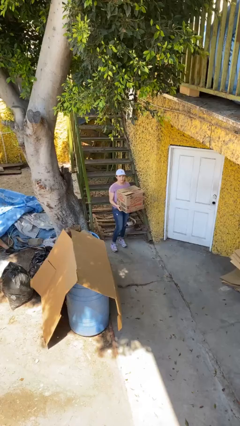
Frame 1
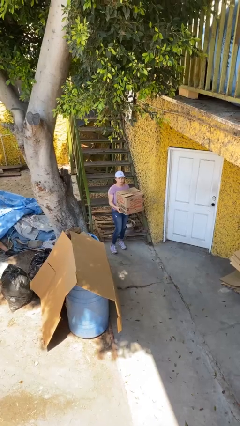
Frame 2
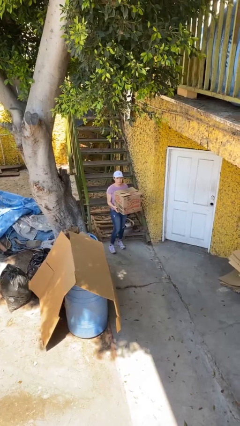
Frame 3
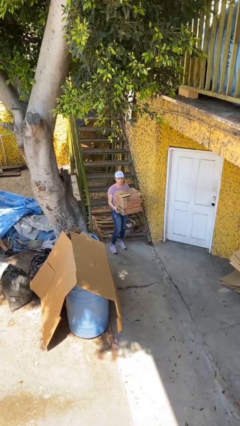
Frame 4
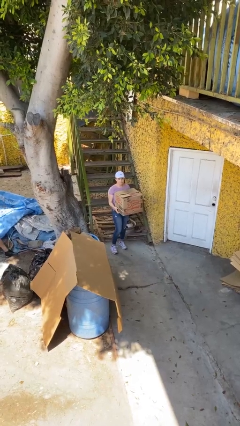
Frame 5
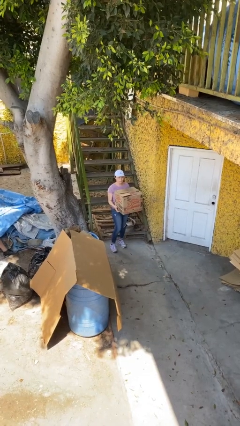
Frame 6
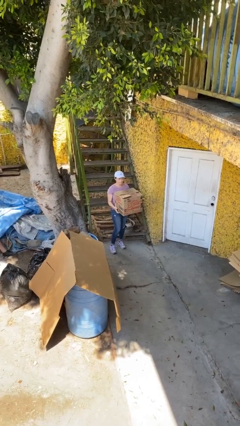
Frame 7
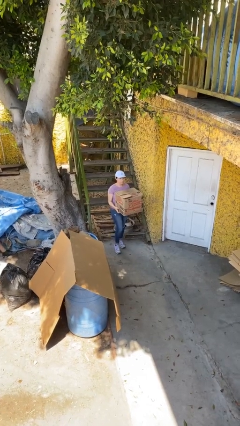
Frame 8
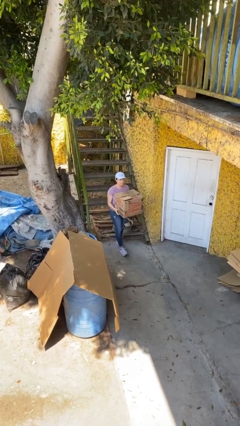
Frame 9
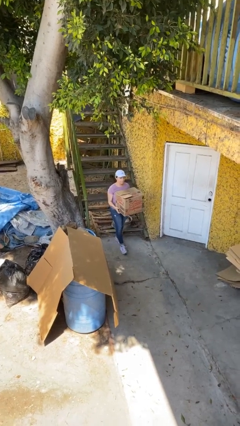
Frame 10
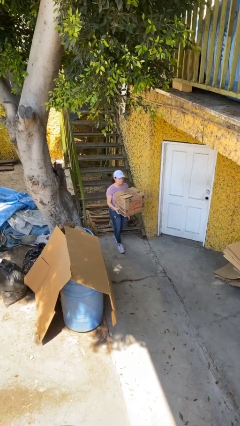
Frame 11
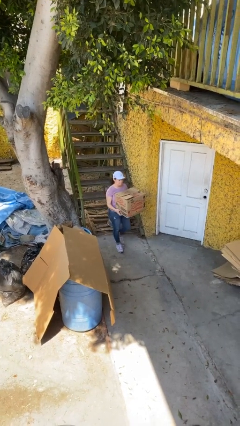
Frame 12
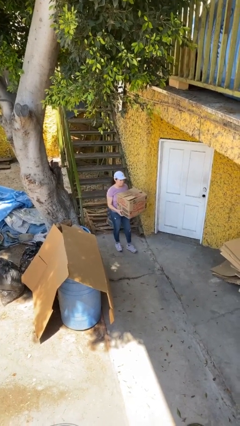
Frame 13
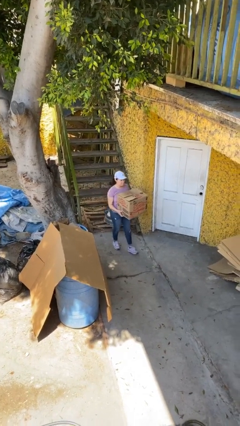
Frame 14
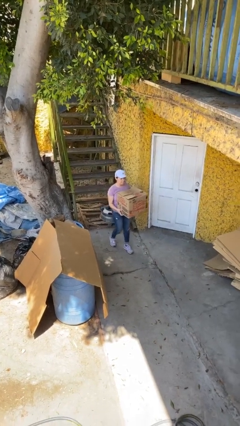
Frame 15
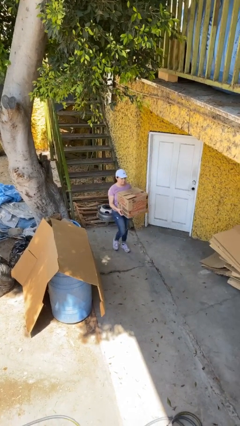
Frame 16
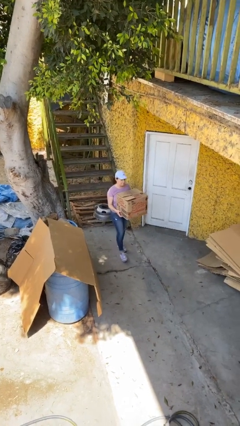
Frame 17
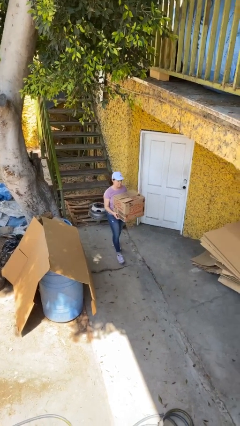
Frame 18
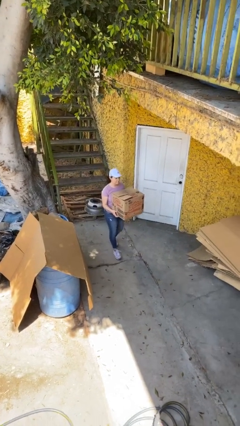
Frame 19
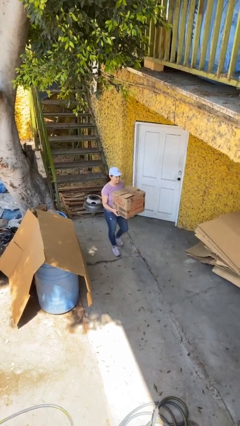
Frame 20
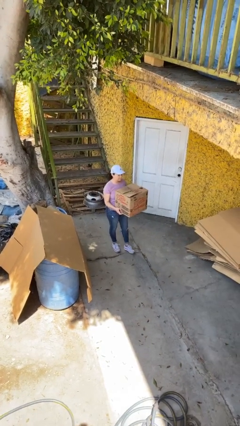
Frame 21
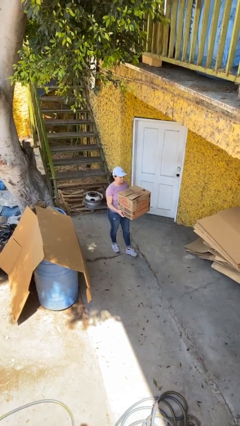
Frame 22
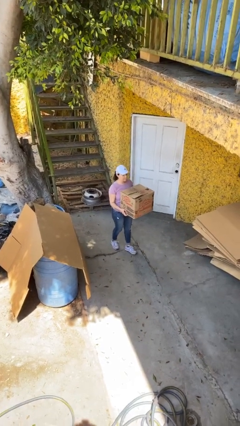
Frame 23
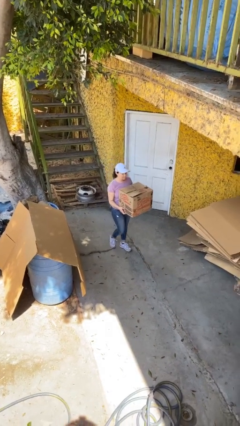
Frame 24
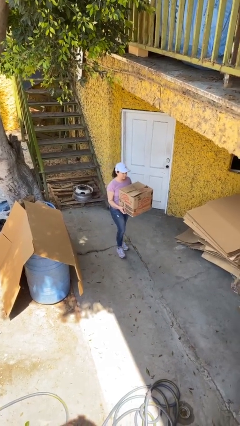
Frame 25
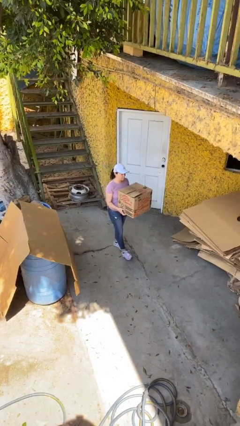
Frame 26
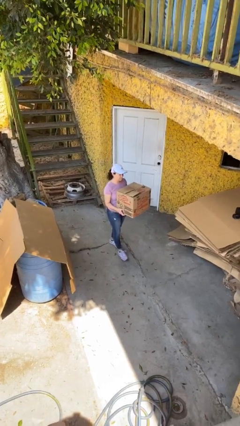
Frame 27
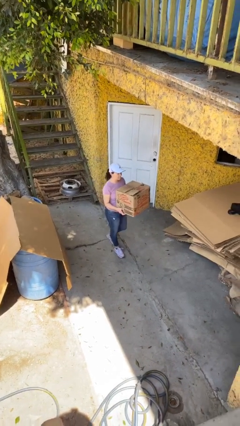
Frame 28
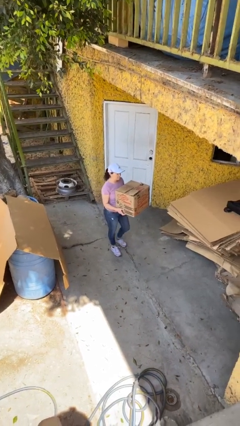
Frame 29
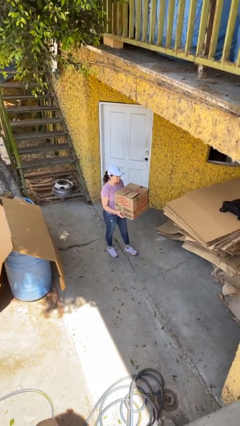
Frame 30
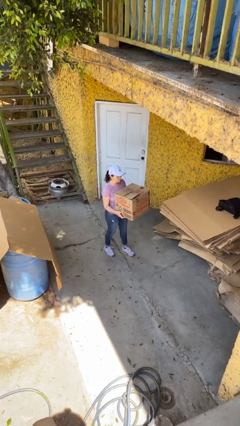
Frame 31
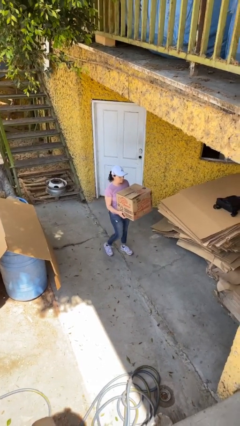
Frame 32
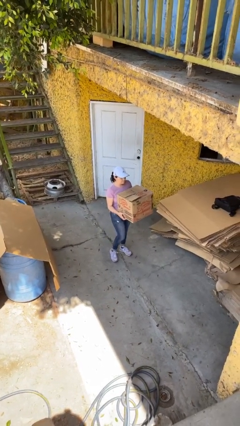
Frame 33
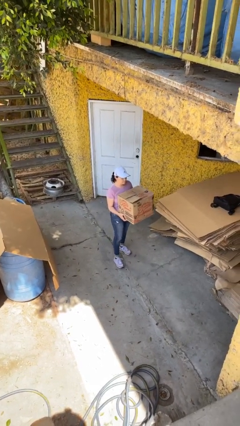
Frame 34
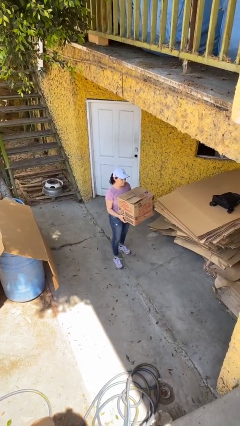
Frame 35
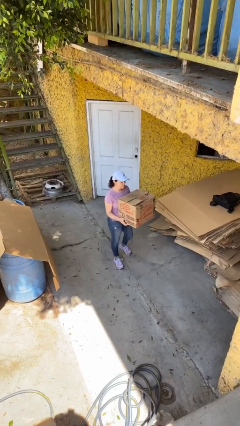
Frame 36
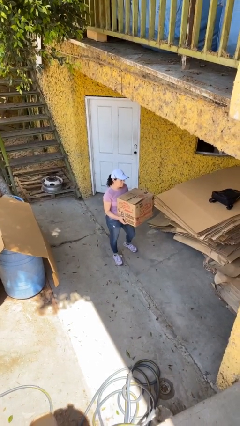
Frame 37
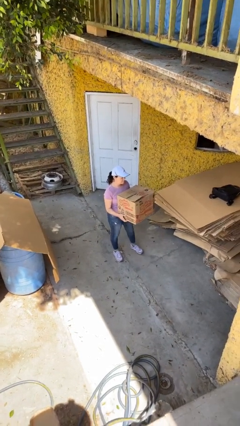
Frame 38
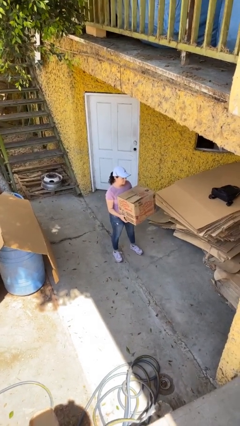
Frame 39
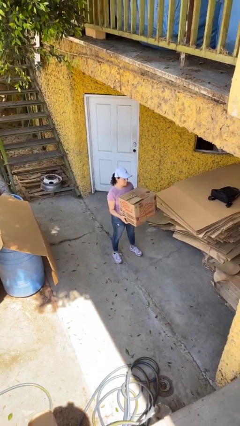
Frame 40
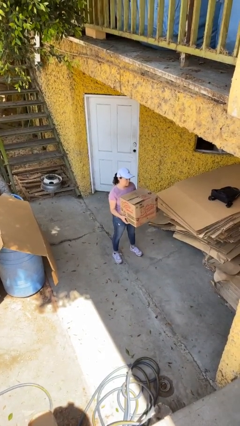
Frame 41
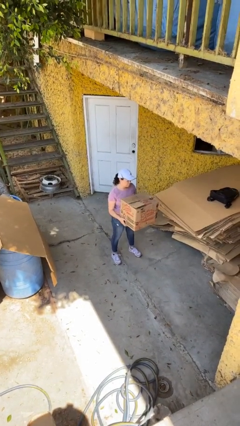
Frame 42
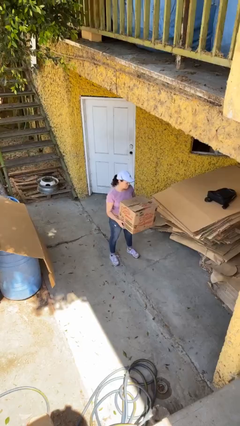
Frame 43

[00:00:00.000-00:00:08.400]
person carries heavy object

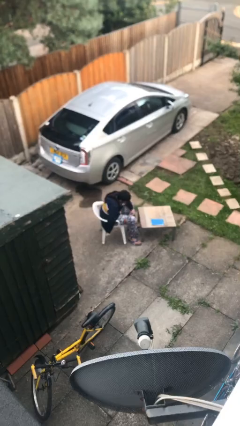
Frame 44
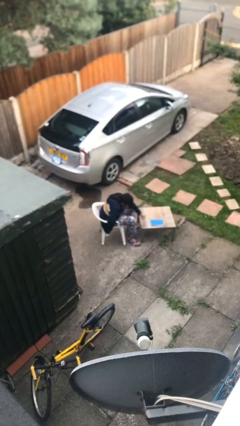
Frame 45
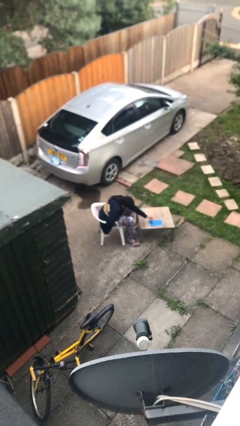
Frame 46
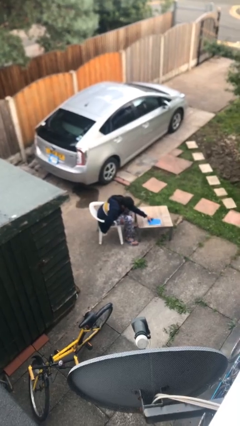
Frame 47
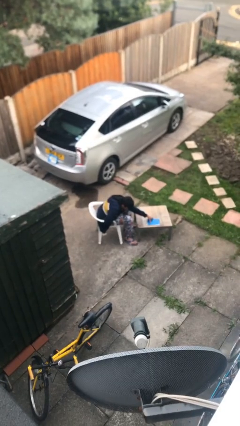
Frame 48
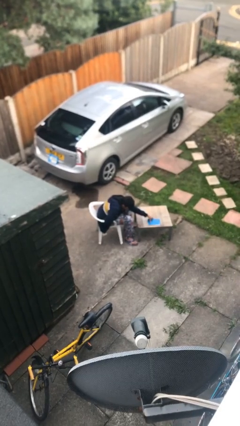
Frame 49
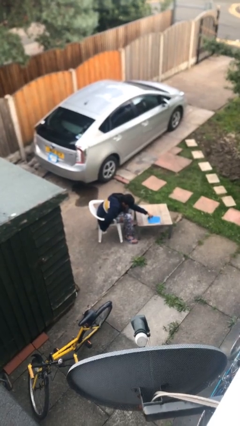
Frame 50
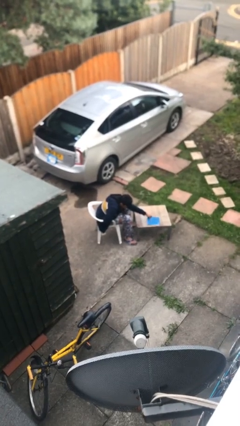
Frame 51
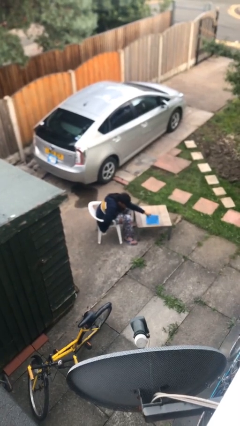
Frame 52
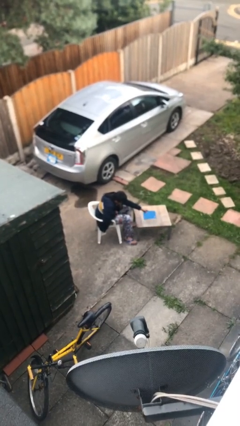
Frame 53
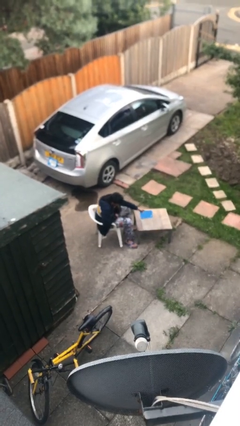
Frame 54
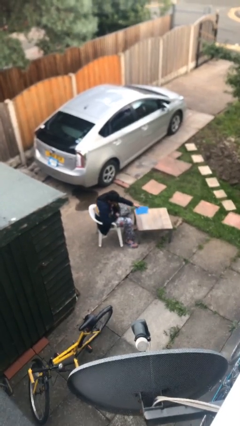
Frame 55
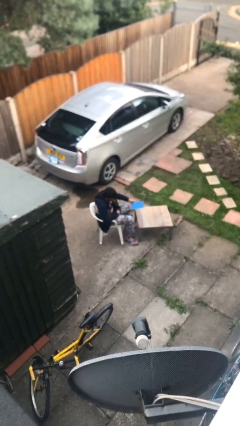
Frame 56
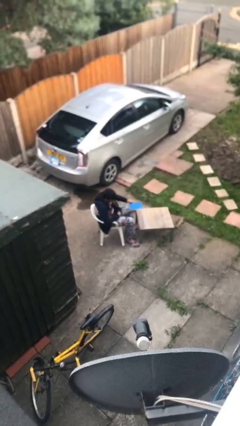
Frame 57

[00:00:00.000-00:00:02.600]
person picks up object from table

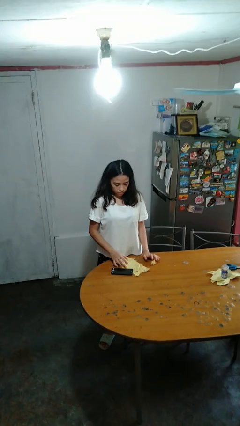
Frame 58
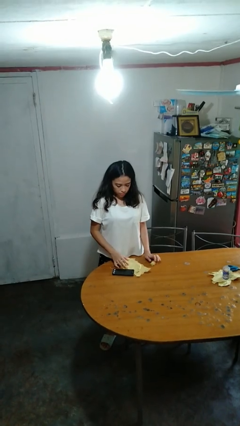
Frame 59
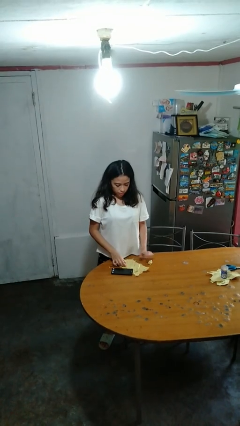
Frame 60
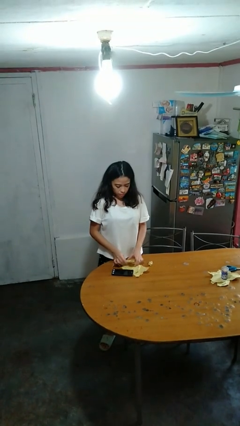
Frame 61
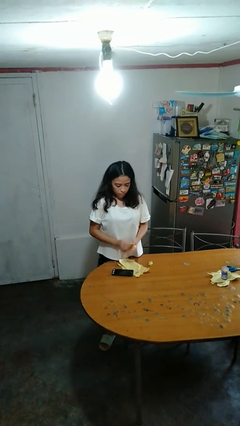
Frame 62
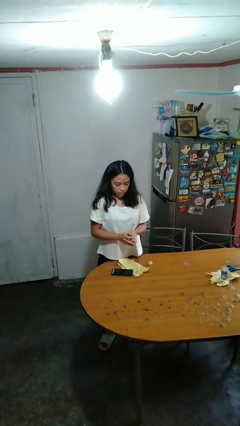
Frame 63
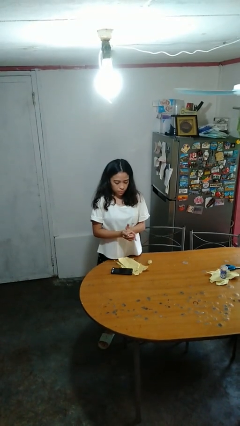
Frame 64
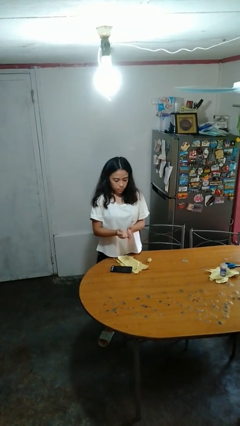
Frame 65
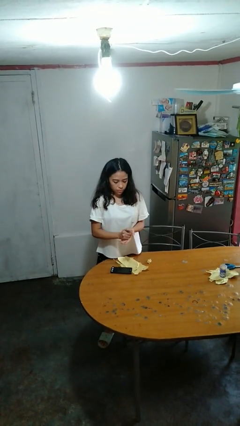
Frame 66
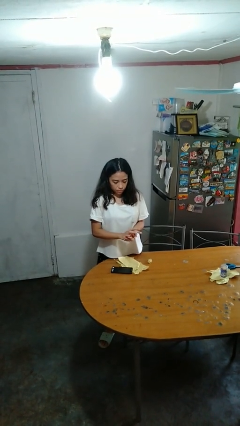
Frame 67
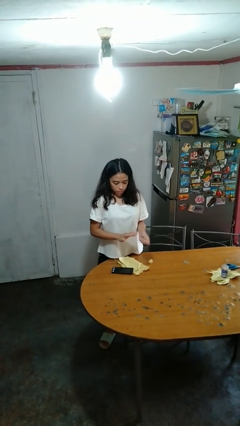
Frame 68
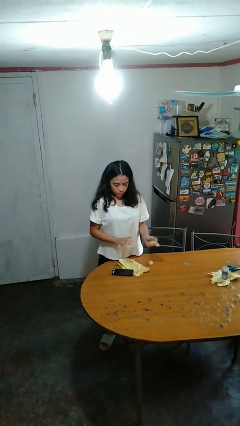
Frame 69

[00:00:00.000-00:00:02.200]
person crumples paper

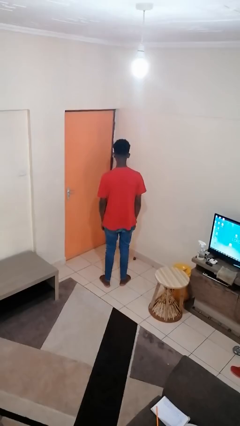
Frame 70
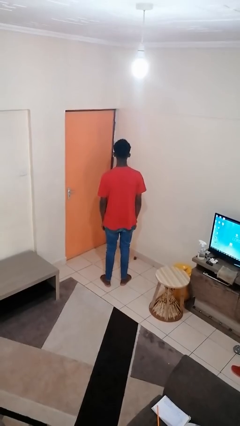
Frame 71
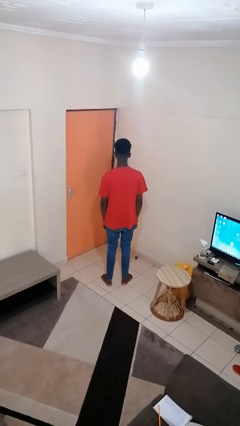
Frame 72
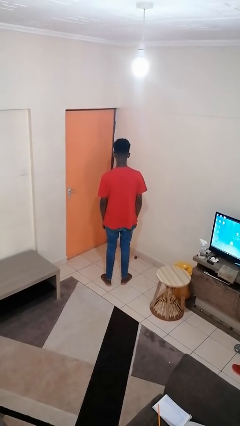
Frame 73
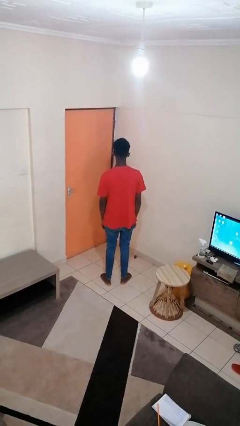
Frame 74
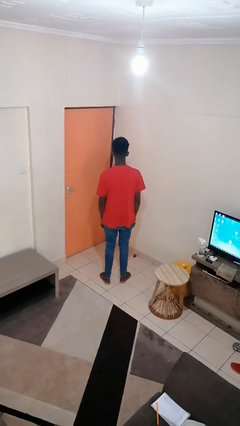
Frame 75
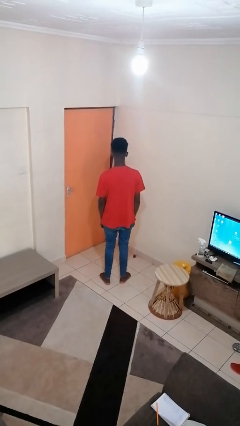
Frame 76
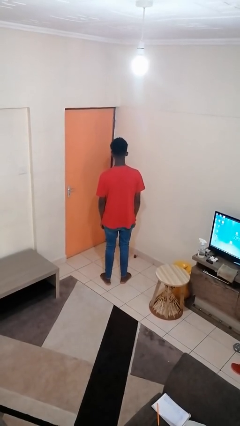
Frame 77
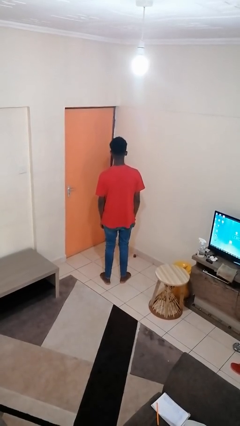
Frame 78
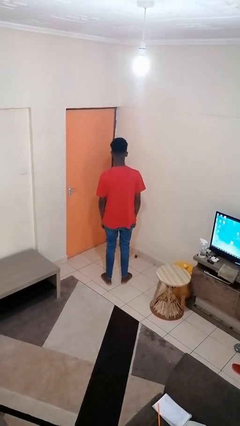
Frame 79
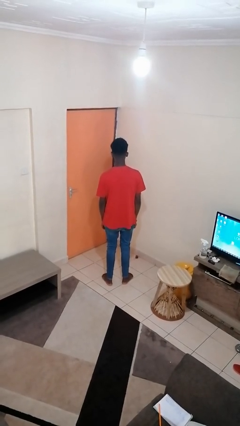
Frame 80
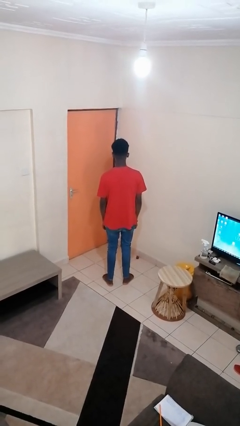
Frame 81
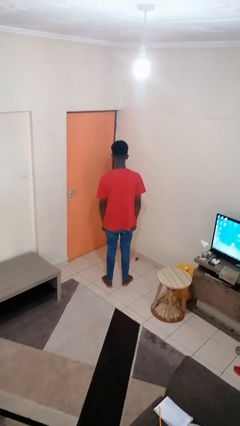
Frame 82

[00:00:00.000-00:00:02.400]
person nods head

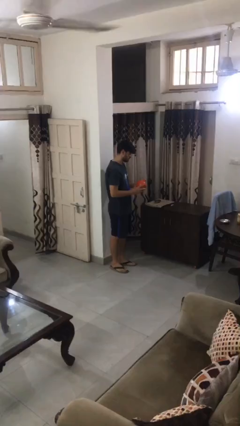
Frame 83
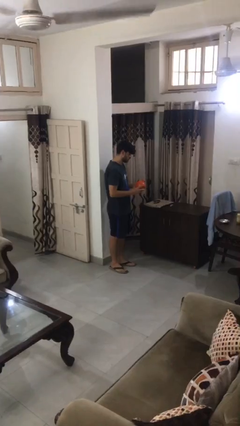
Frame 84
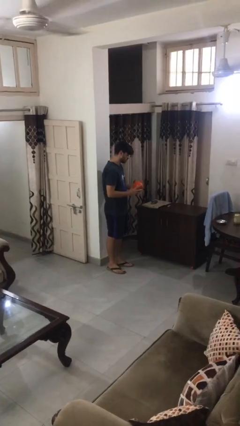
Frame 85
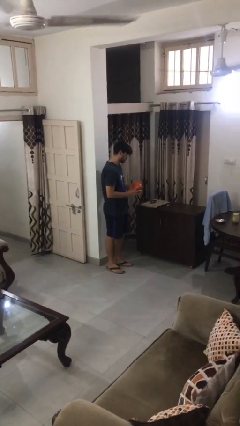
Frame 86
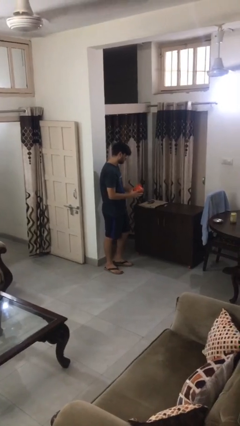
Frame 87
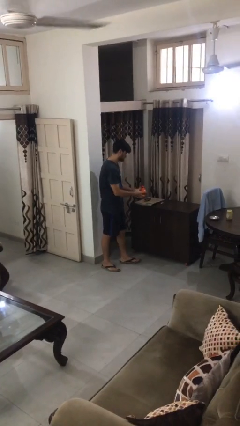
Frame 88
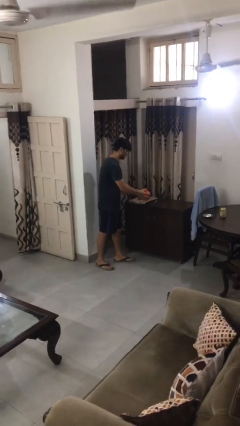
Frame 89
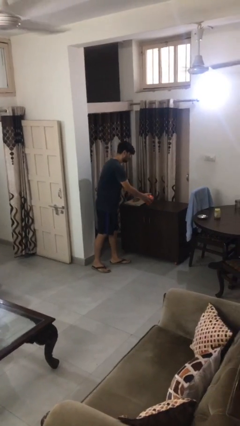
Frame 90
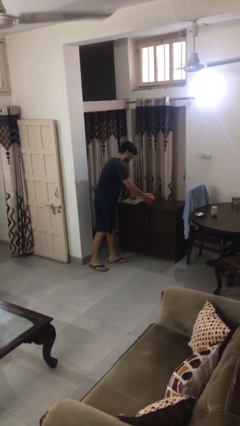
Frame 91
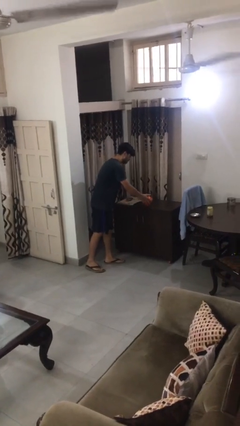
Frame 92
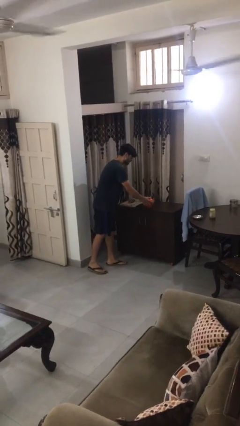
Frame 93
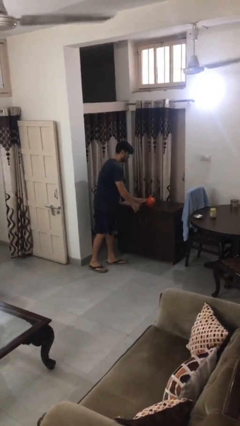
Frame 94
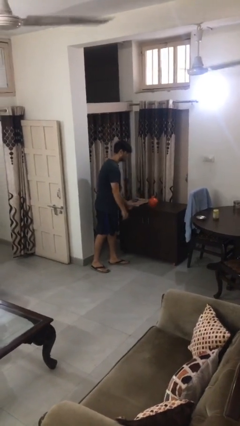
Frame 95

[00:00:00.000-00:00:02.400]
person puts down object on countertop
